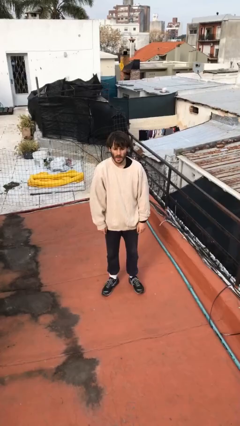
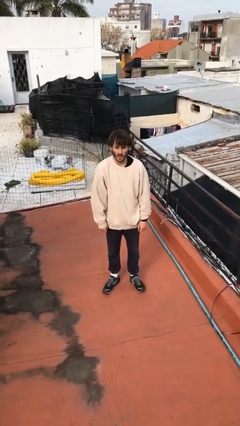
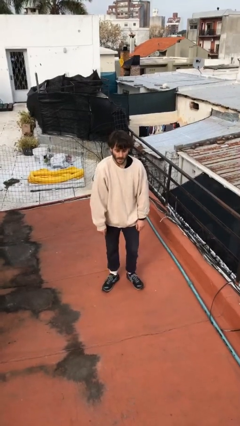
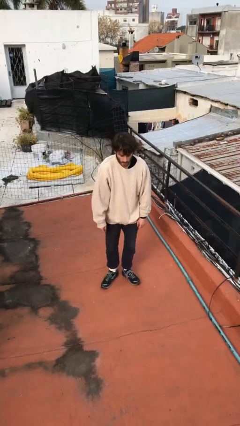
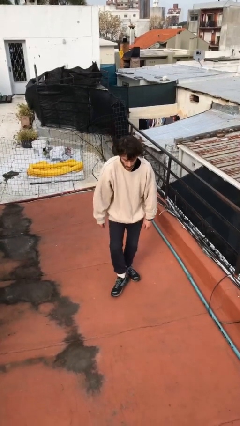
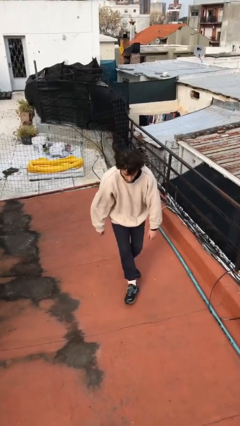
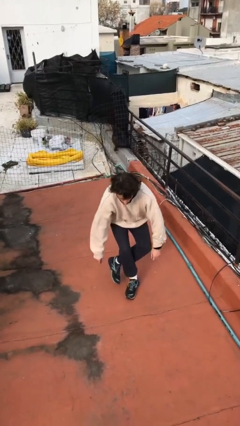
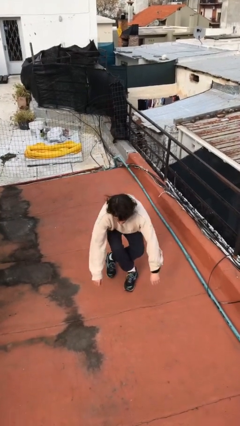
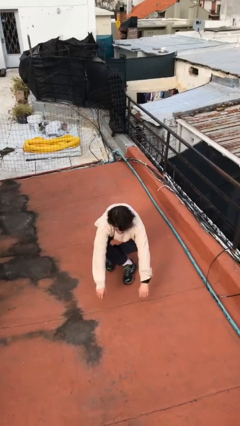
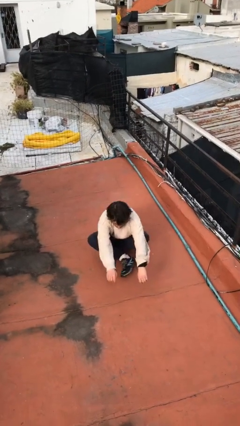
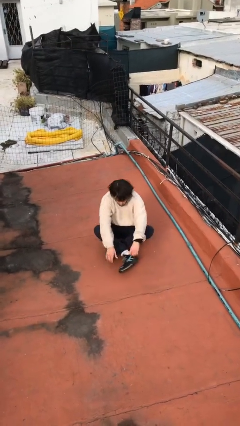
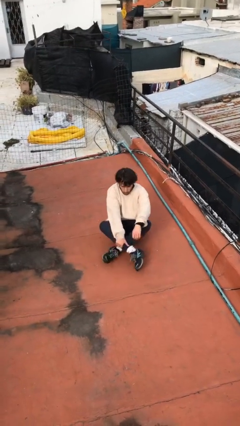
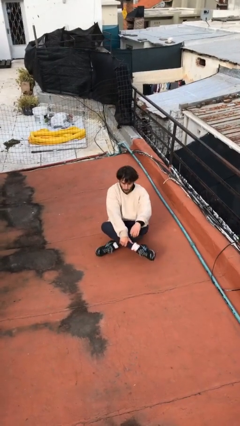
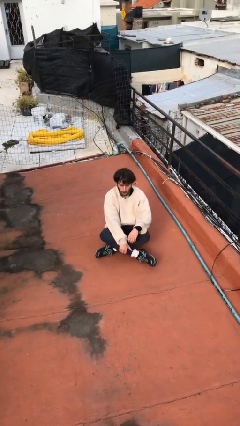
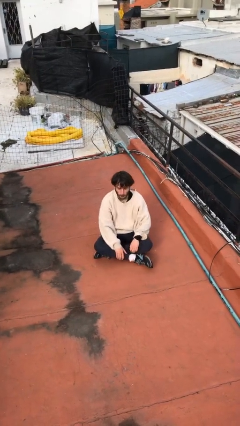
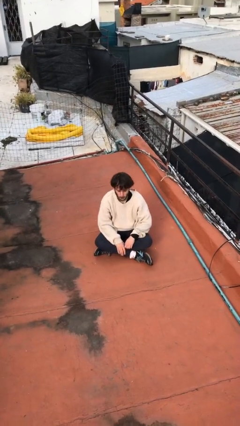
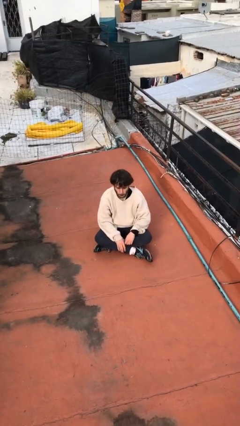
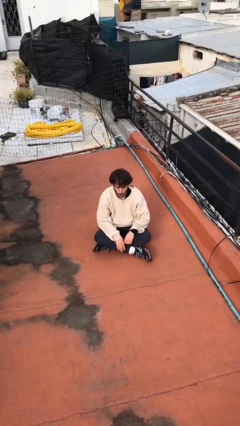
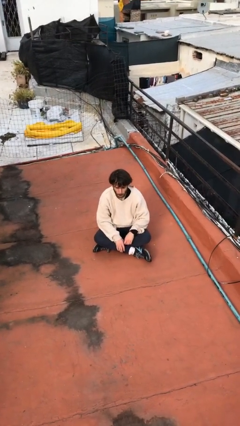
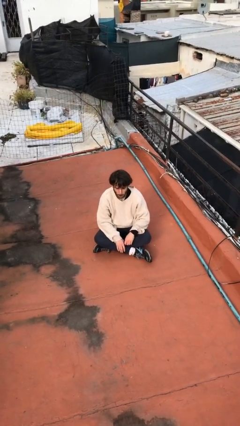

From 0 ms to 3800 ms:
person sits crisscross

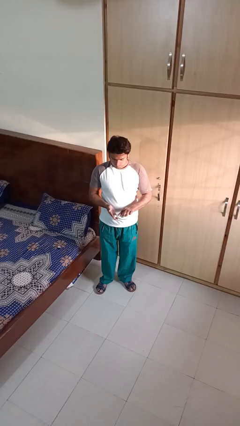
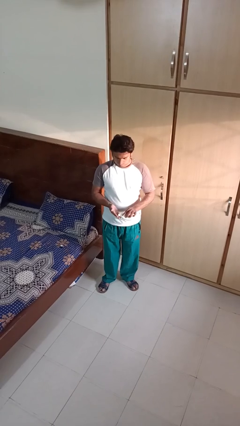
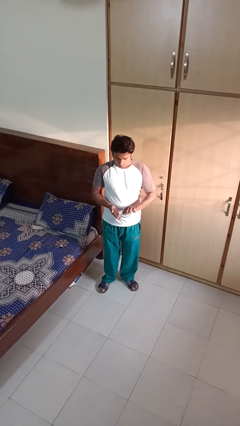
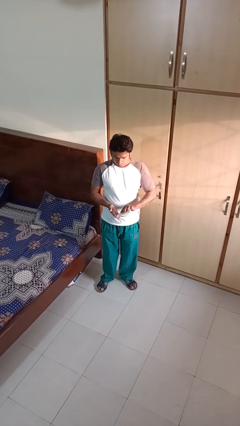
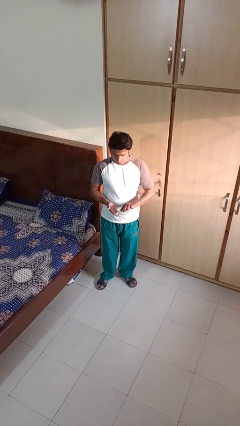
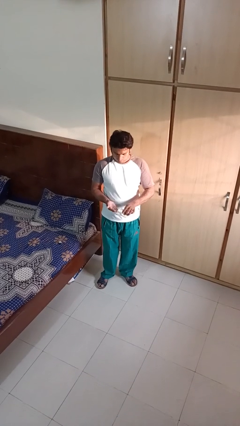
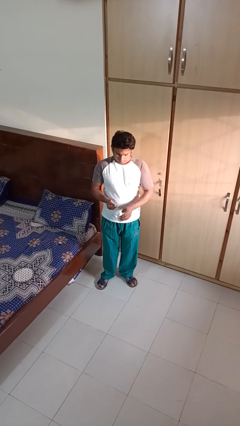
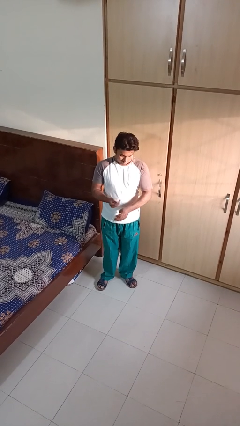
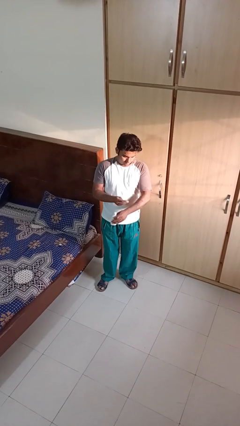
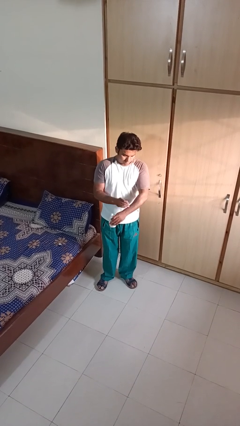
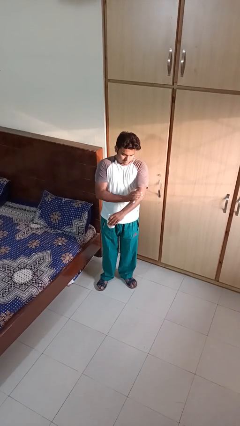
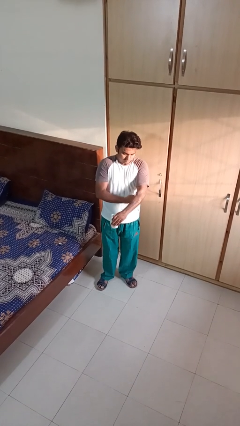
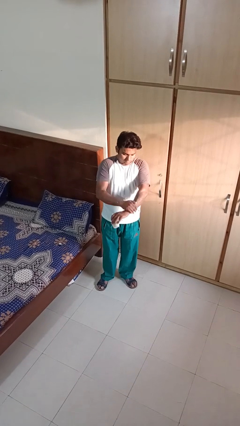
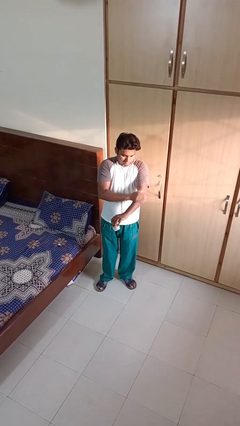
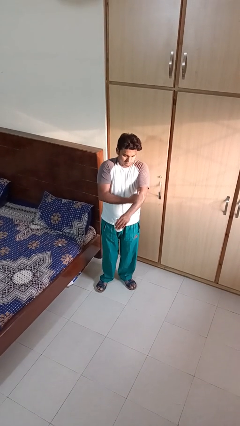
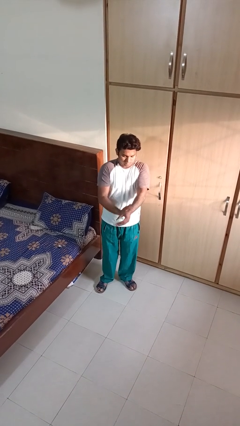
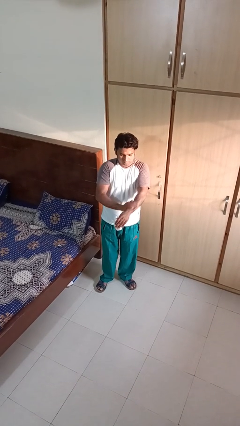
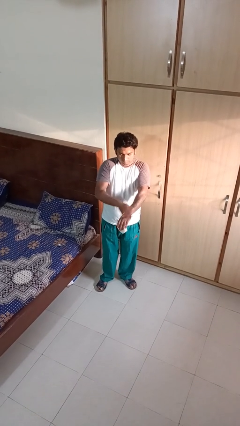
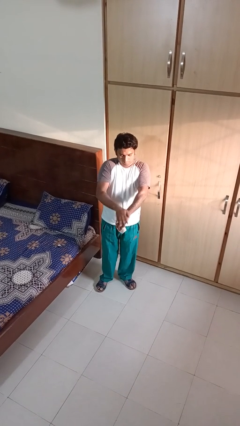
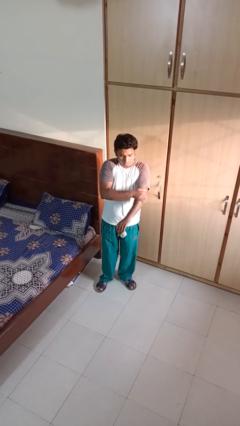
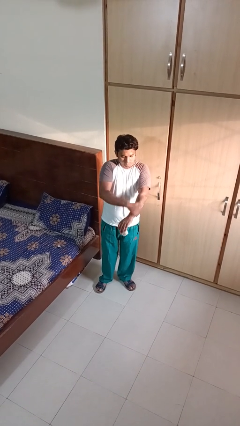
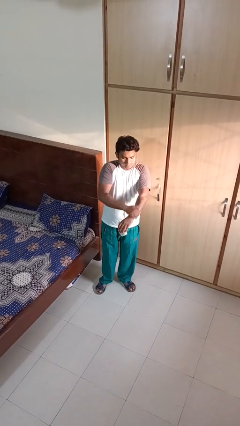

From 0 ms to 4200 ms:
person applies sunscreen

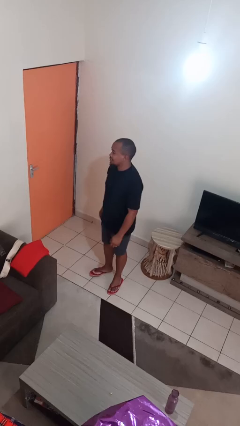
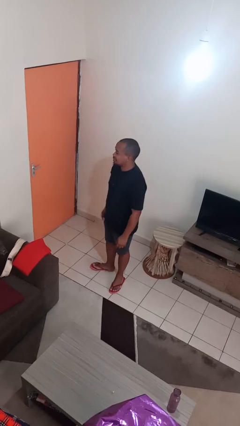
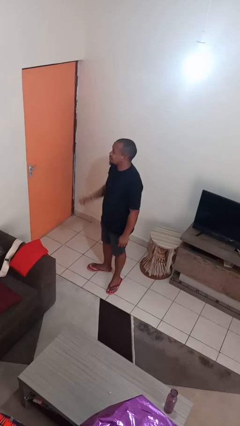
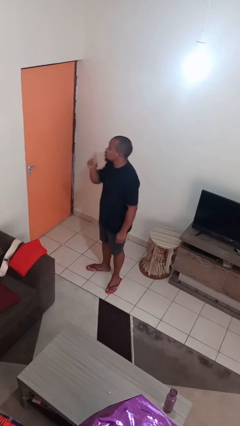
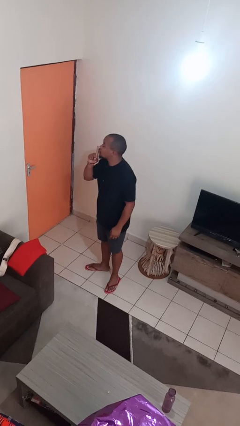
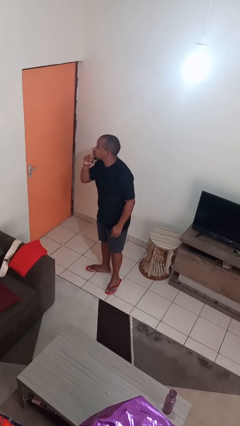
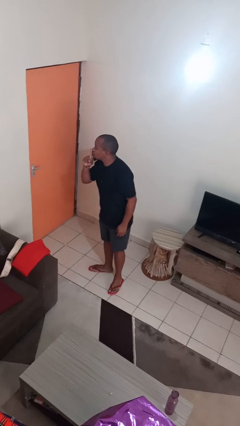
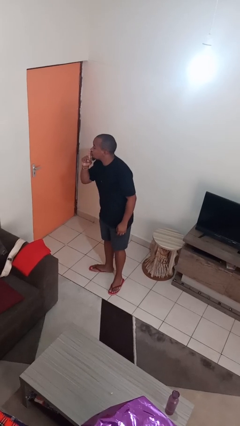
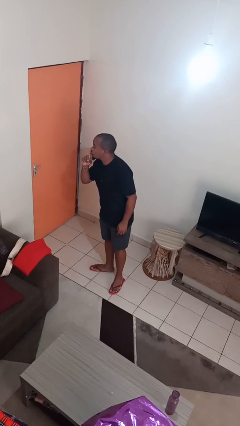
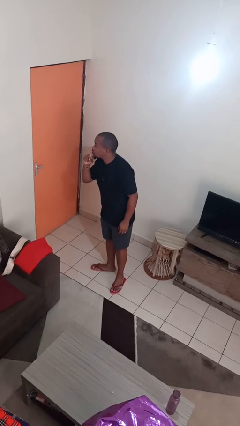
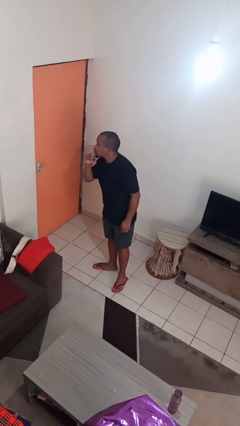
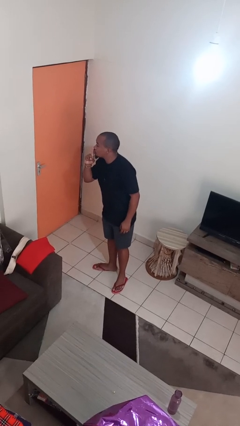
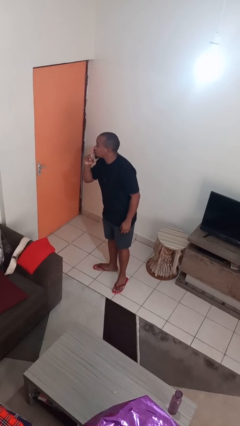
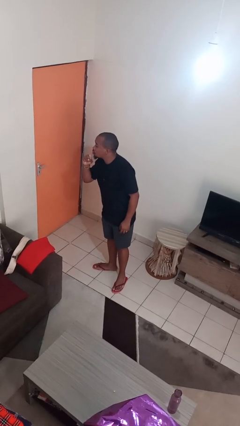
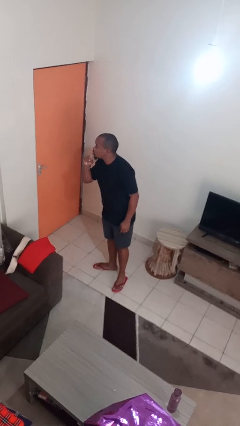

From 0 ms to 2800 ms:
person gestures be quiet

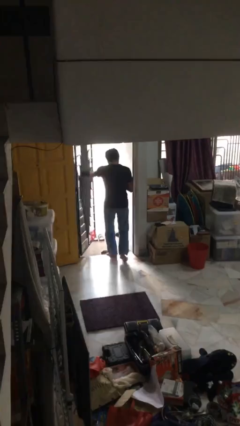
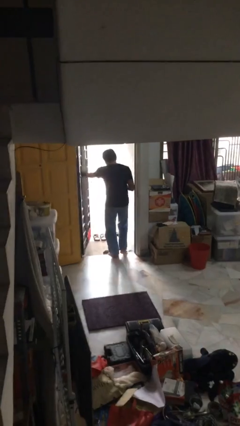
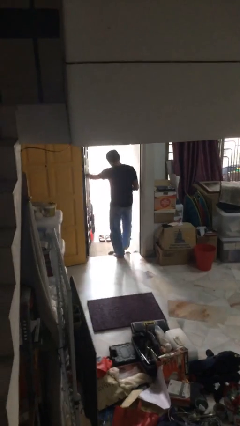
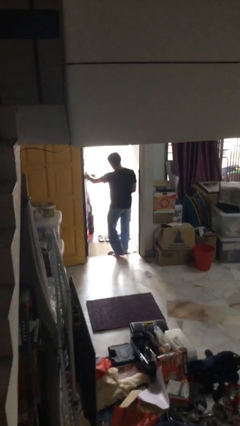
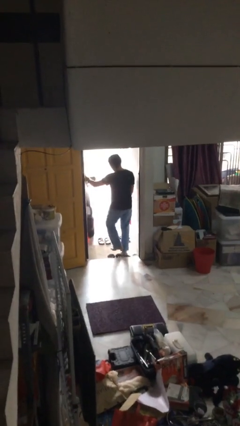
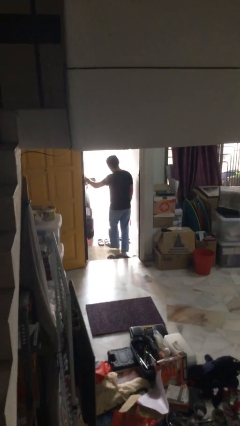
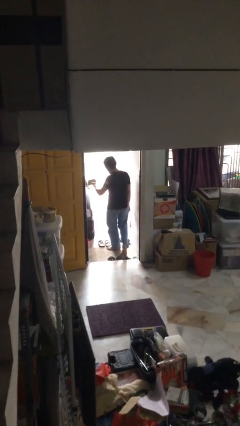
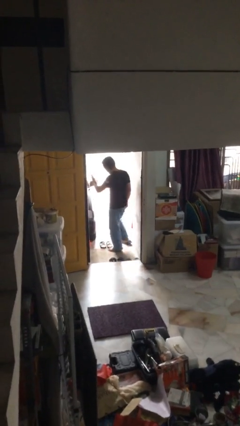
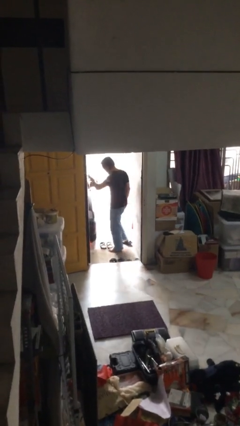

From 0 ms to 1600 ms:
person exits scene through structure

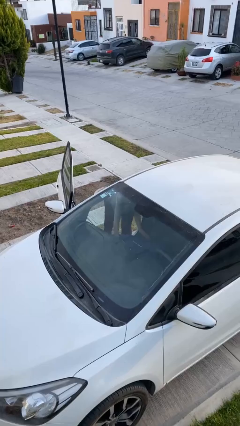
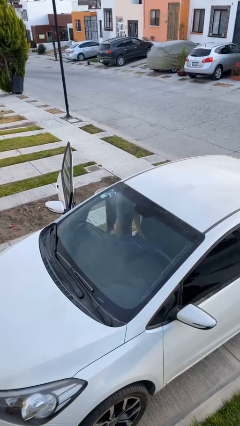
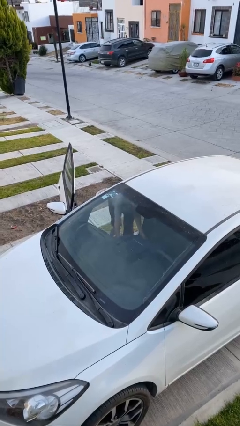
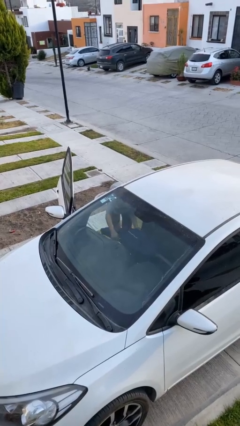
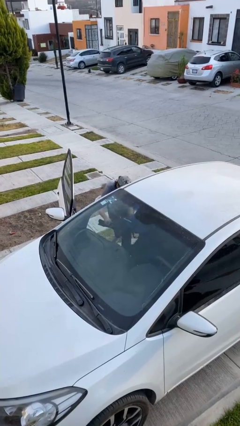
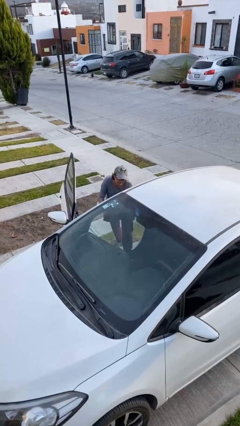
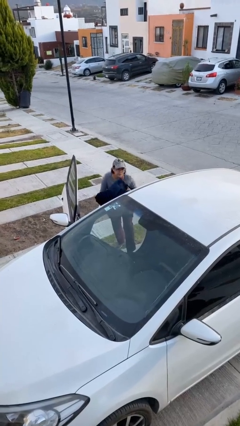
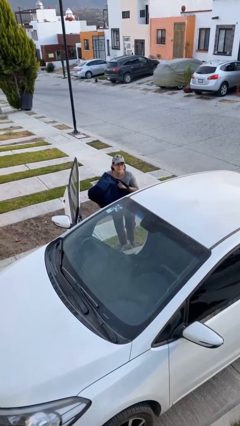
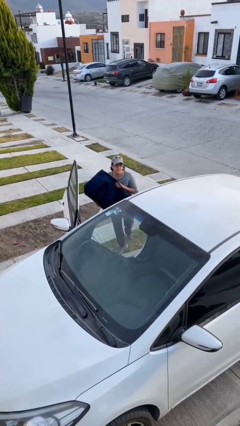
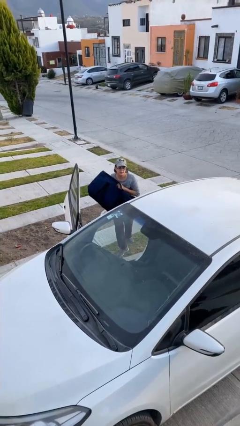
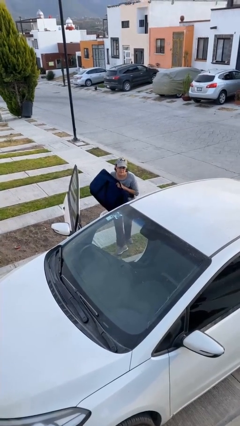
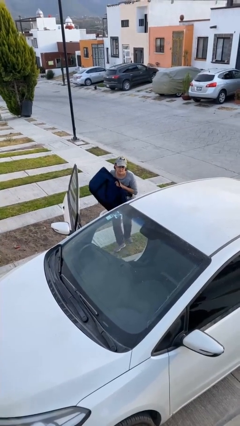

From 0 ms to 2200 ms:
person unloads car

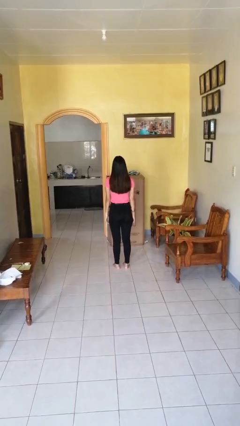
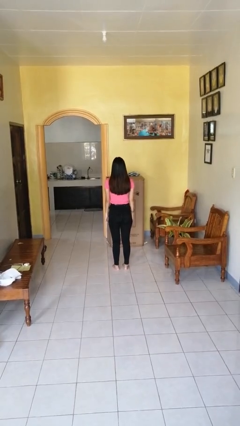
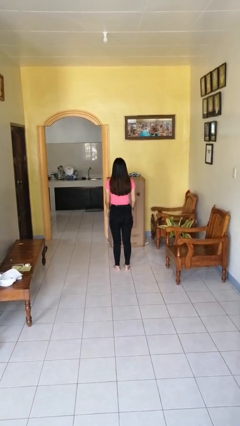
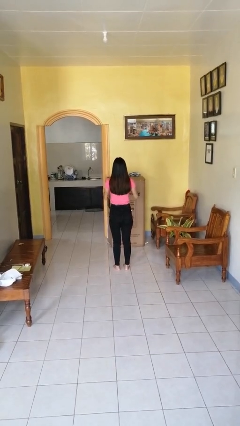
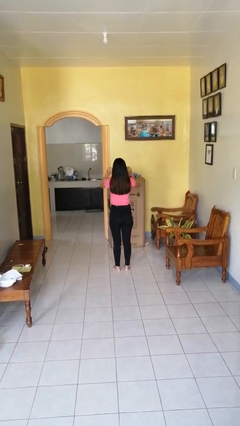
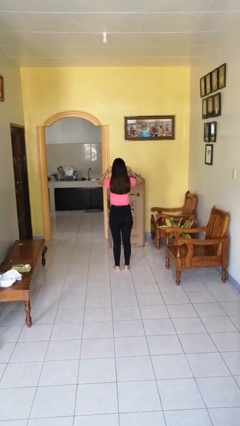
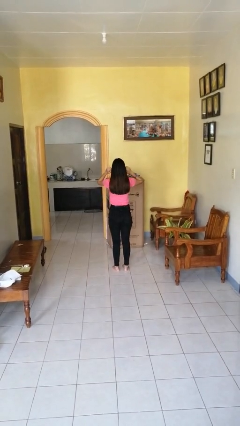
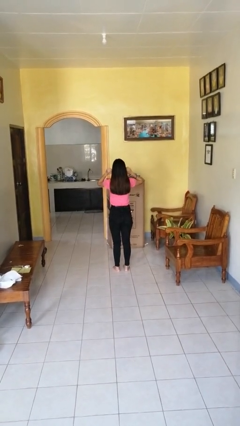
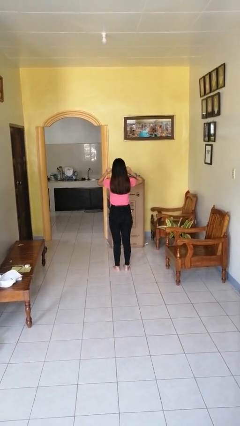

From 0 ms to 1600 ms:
person puts fingers in ear

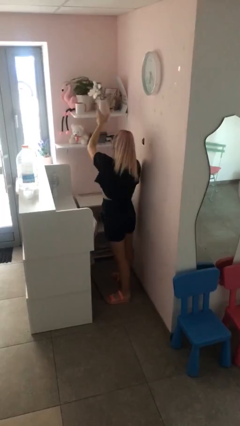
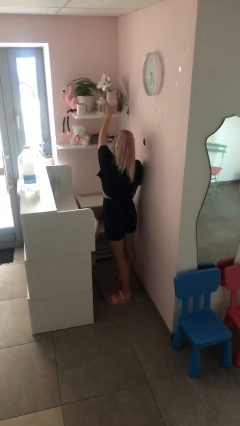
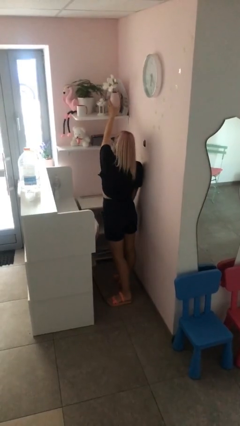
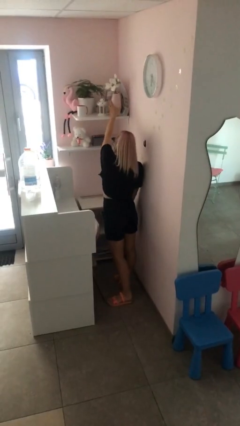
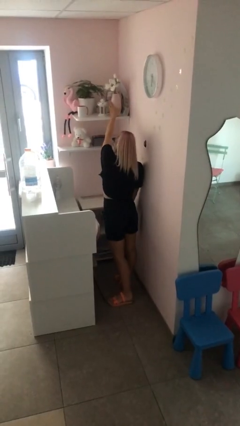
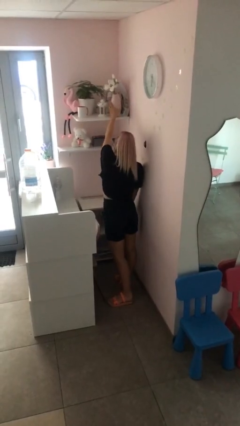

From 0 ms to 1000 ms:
person puts down object into cabinet
